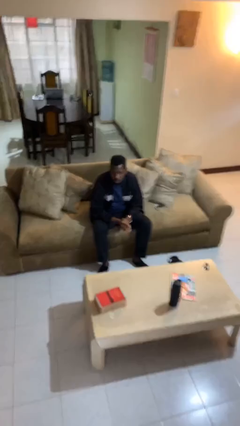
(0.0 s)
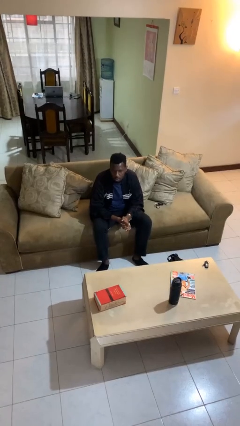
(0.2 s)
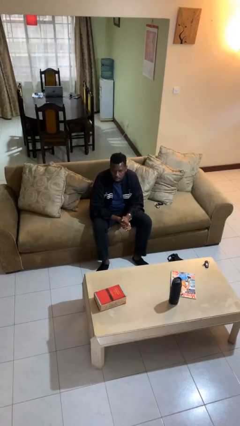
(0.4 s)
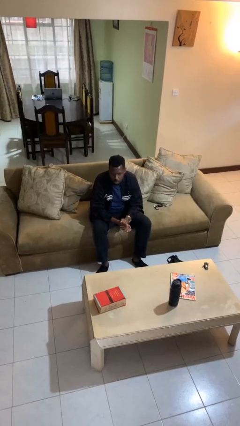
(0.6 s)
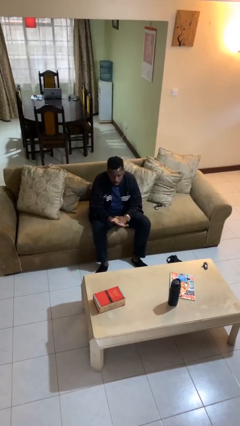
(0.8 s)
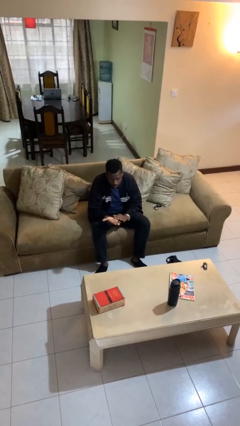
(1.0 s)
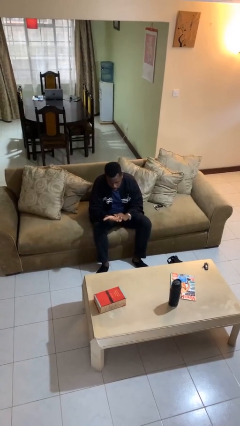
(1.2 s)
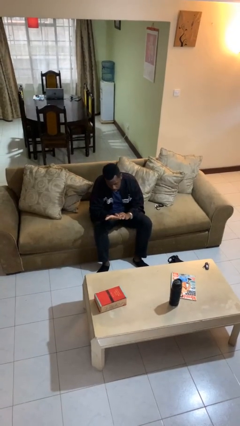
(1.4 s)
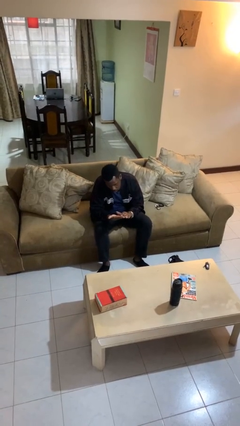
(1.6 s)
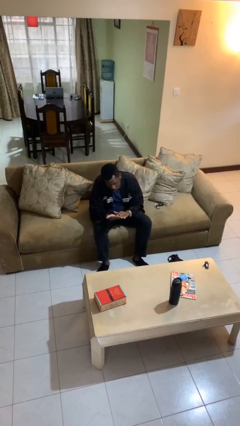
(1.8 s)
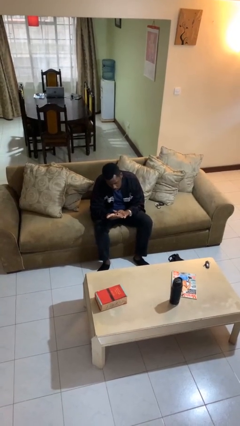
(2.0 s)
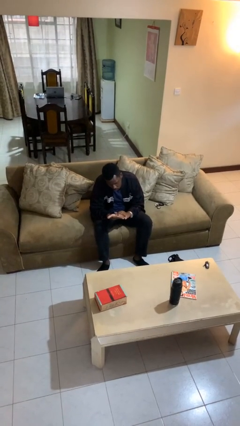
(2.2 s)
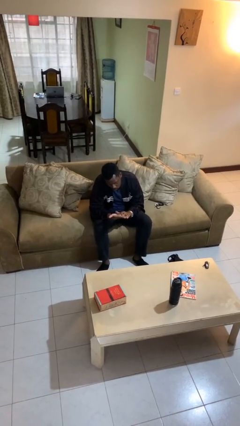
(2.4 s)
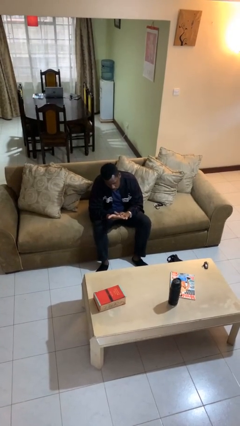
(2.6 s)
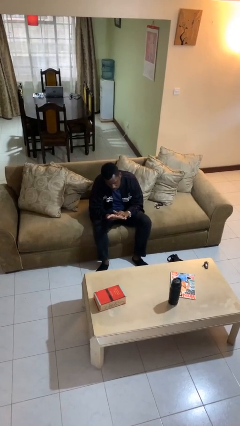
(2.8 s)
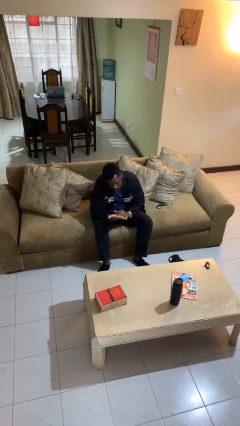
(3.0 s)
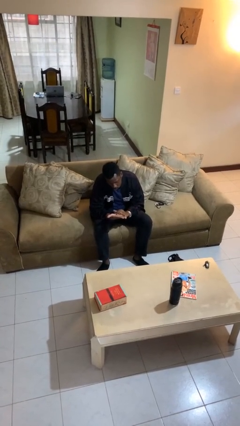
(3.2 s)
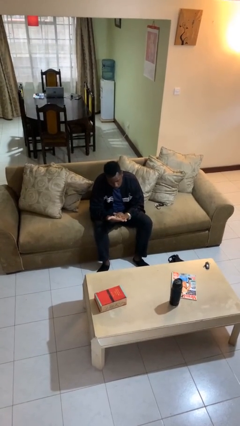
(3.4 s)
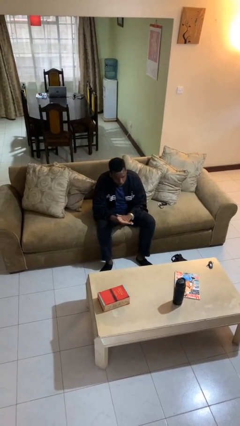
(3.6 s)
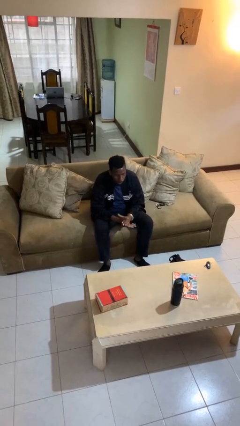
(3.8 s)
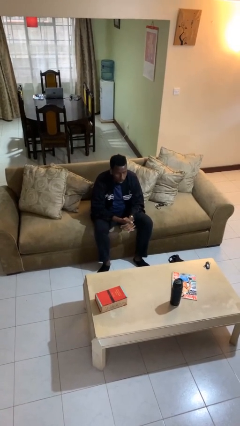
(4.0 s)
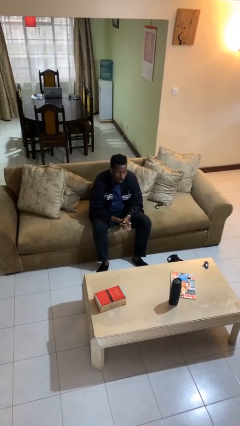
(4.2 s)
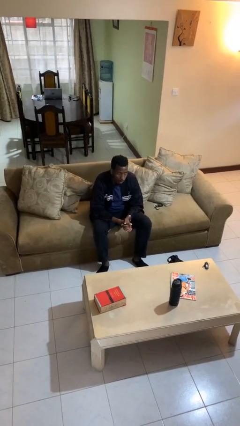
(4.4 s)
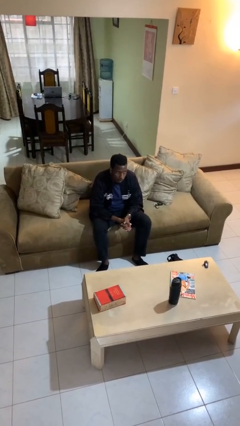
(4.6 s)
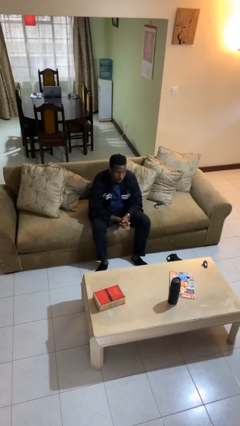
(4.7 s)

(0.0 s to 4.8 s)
person looks at hands in lap

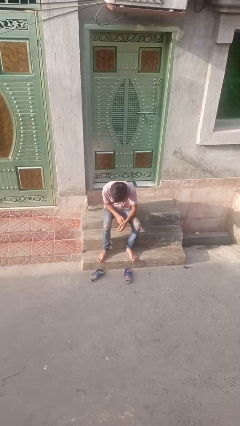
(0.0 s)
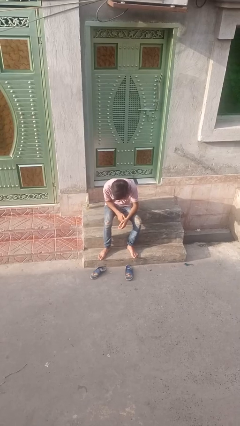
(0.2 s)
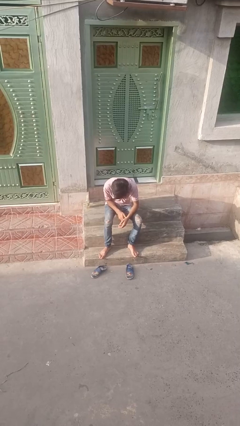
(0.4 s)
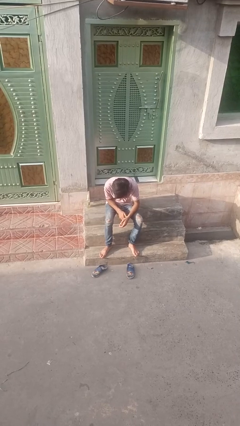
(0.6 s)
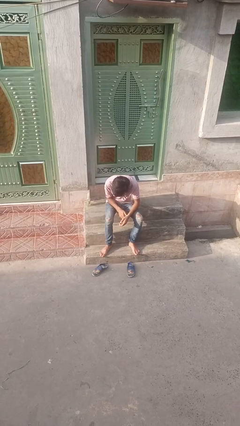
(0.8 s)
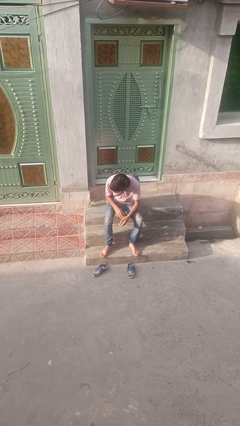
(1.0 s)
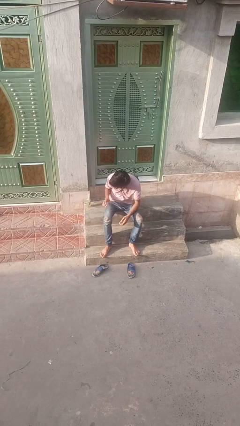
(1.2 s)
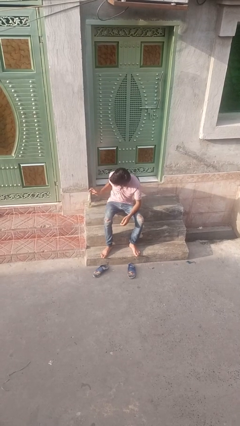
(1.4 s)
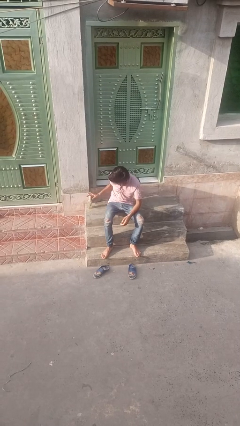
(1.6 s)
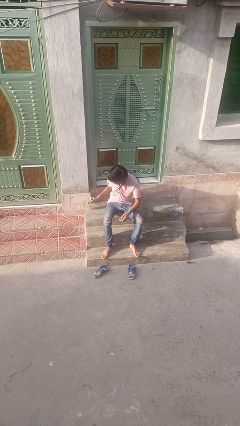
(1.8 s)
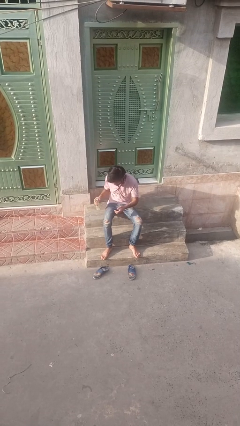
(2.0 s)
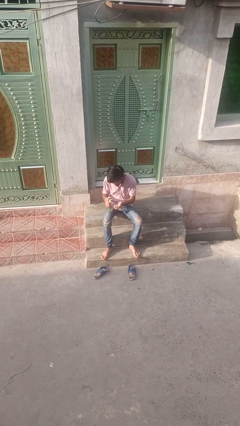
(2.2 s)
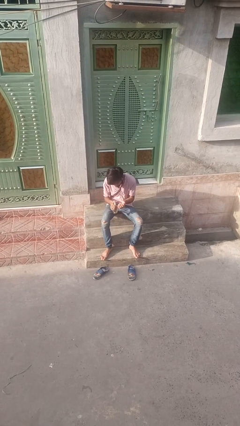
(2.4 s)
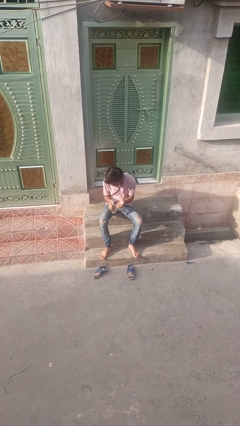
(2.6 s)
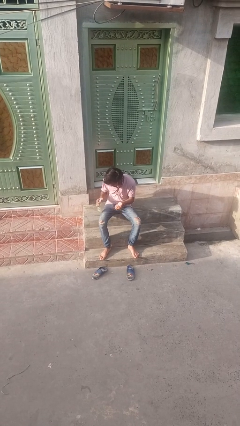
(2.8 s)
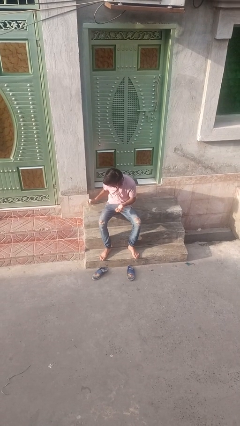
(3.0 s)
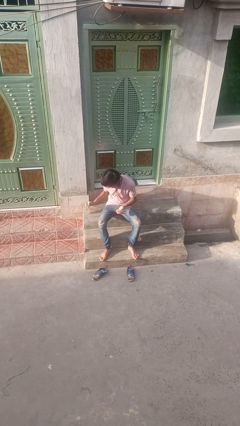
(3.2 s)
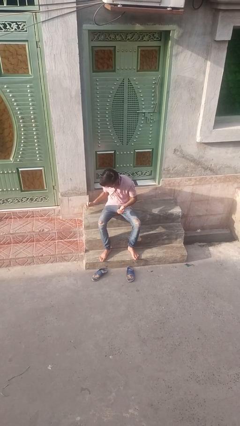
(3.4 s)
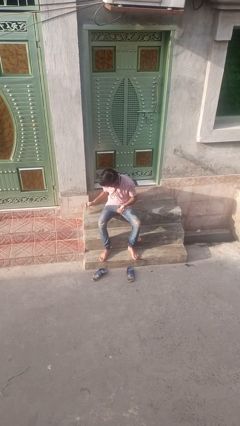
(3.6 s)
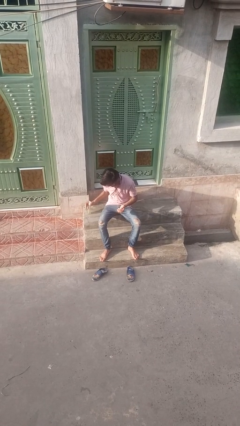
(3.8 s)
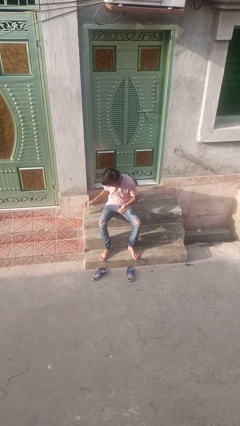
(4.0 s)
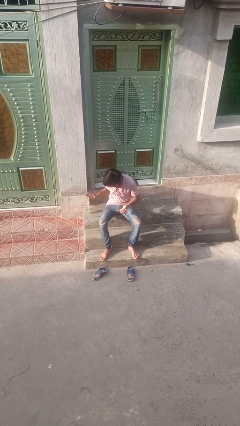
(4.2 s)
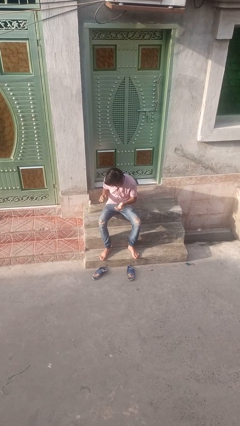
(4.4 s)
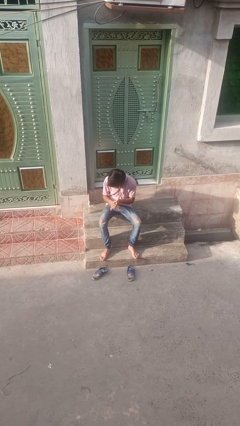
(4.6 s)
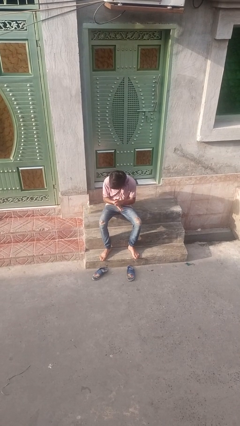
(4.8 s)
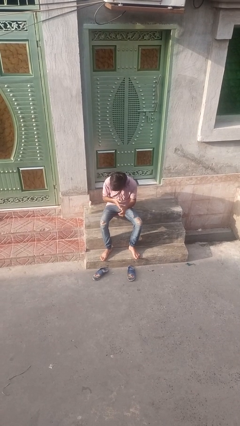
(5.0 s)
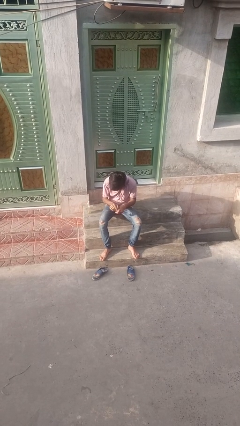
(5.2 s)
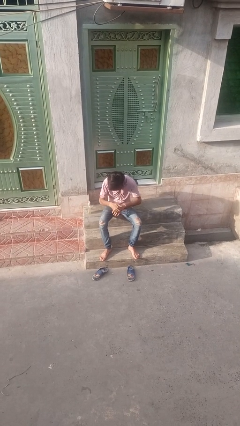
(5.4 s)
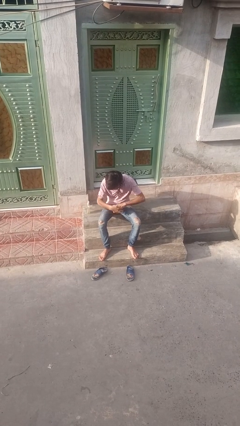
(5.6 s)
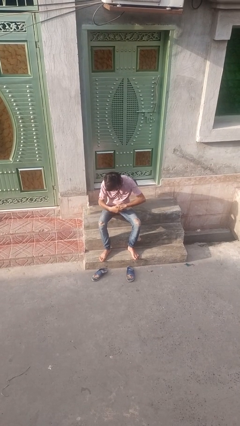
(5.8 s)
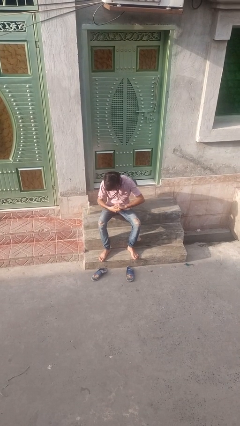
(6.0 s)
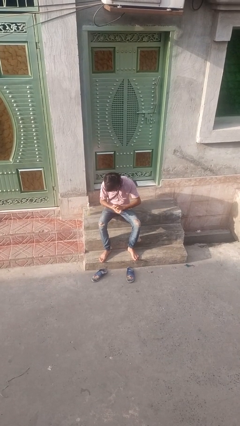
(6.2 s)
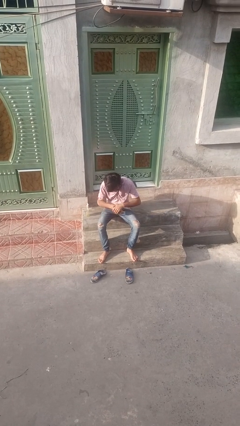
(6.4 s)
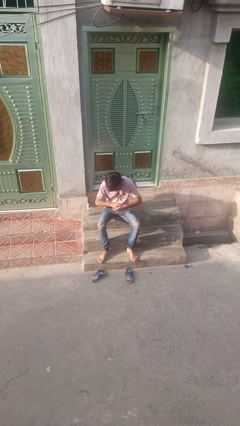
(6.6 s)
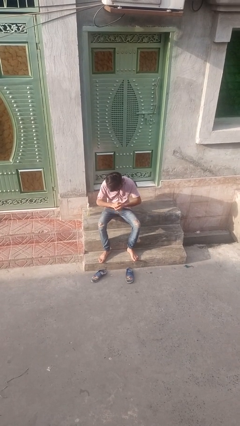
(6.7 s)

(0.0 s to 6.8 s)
person applies facial moisturizer

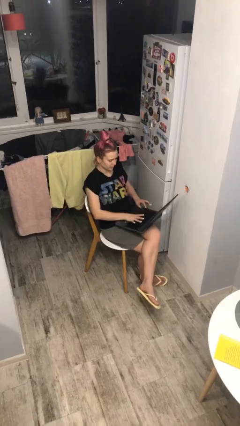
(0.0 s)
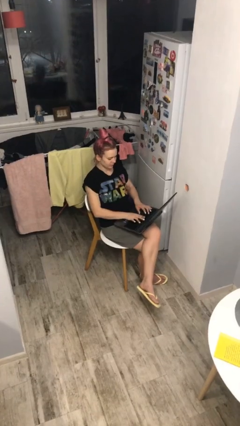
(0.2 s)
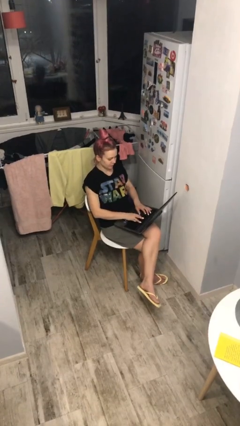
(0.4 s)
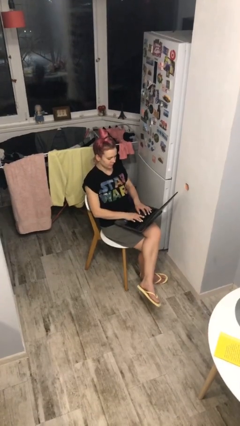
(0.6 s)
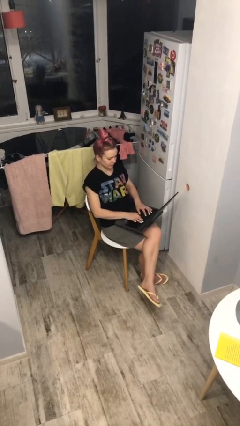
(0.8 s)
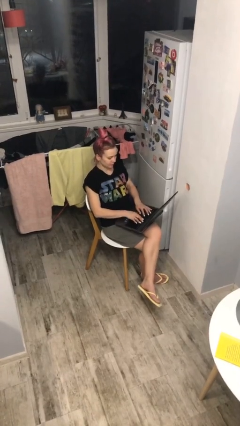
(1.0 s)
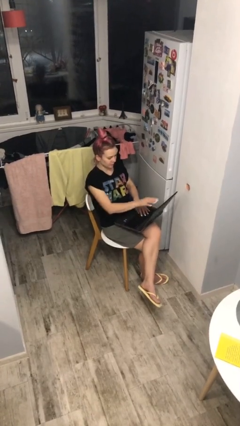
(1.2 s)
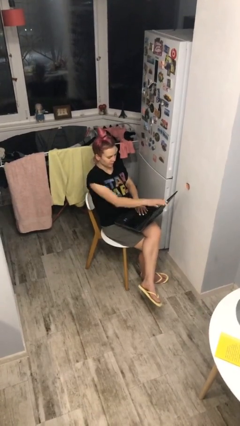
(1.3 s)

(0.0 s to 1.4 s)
person interacts with laptop

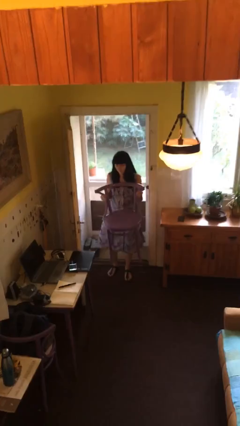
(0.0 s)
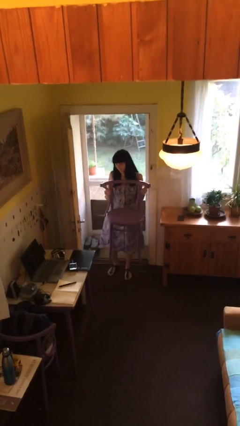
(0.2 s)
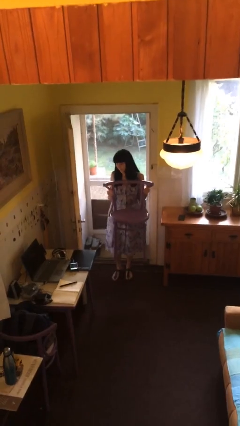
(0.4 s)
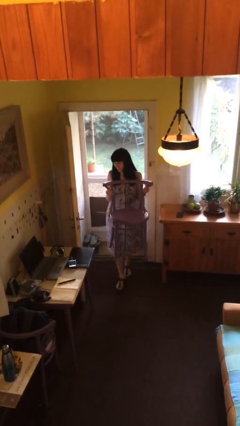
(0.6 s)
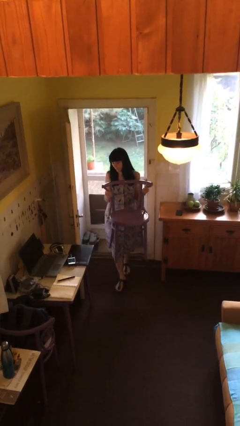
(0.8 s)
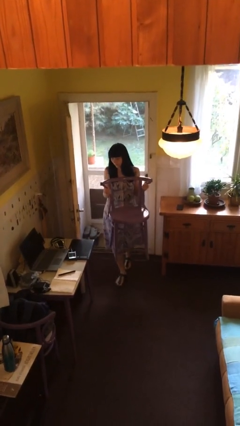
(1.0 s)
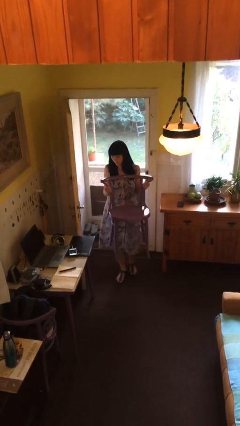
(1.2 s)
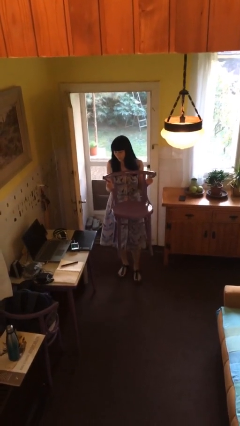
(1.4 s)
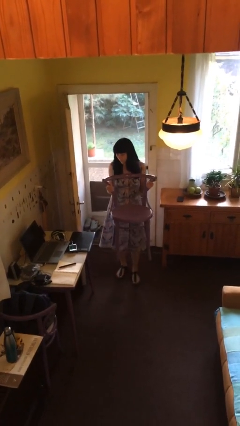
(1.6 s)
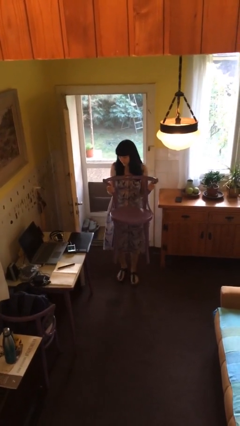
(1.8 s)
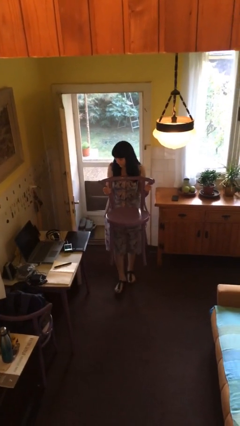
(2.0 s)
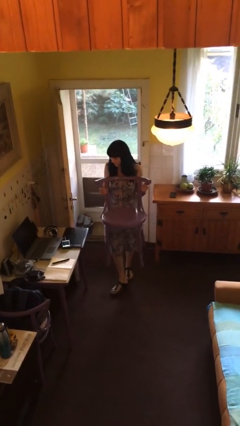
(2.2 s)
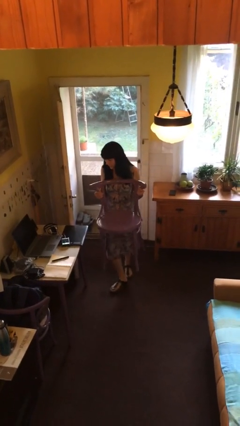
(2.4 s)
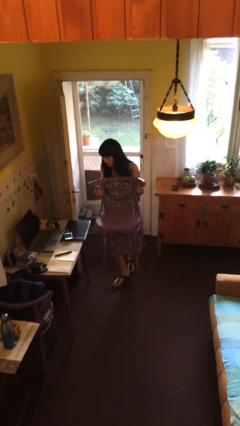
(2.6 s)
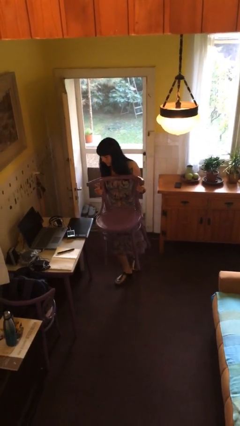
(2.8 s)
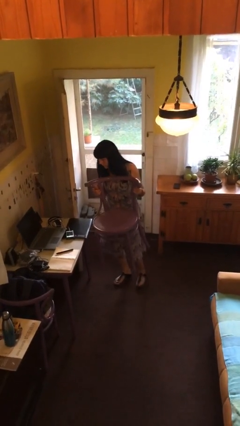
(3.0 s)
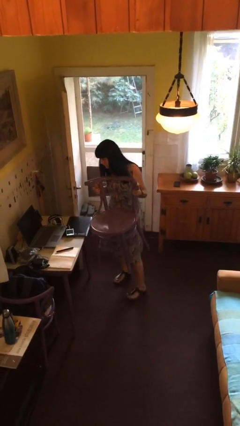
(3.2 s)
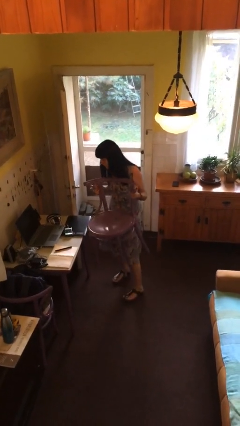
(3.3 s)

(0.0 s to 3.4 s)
person carries heavy object

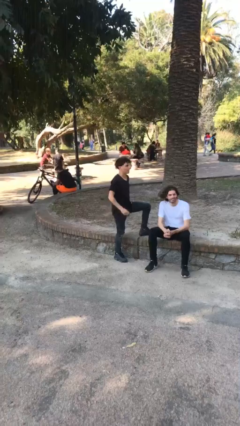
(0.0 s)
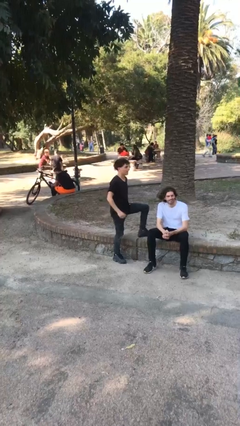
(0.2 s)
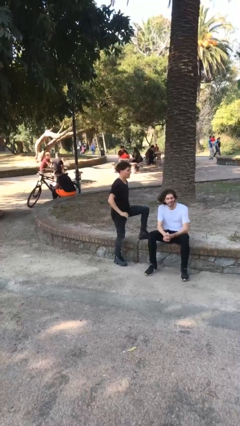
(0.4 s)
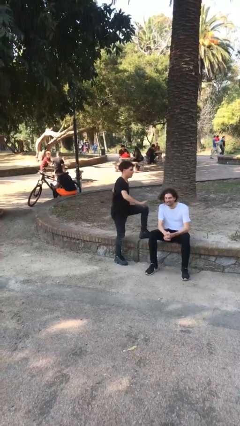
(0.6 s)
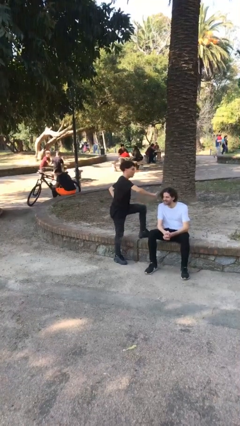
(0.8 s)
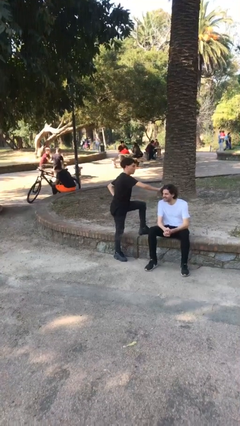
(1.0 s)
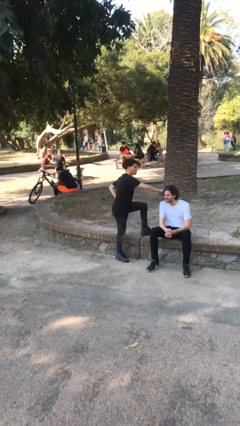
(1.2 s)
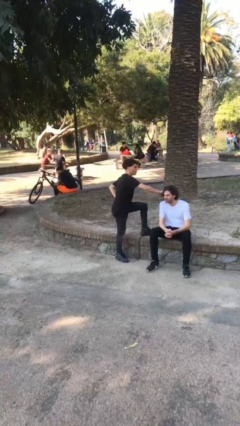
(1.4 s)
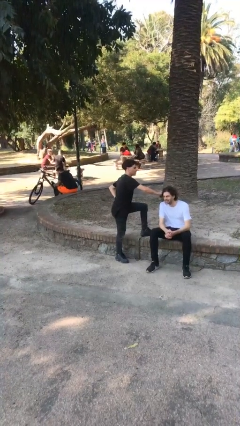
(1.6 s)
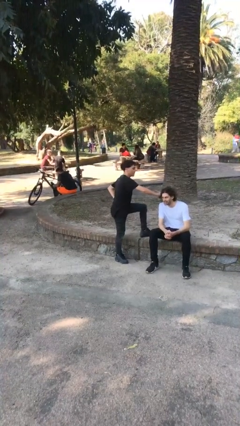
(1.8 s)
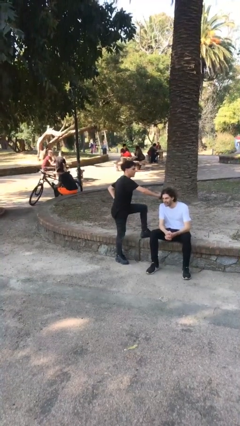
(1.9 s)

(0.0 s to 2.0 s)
person grabs person by hair
